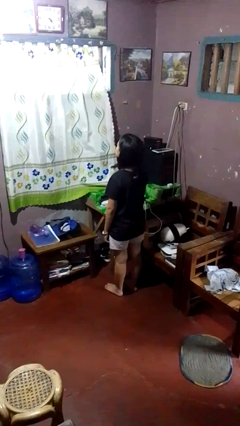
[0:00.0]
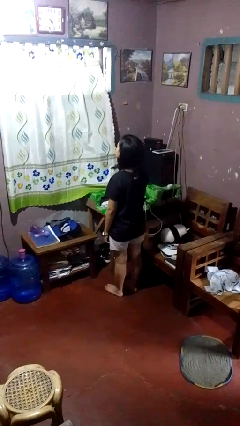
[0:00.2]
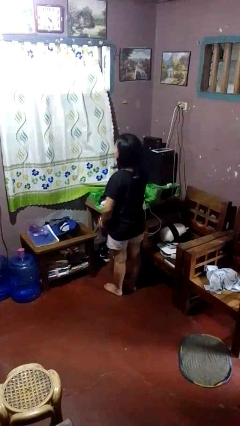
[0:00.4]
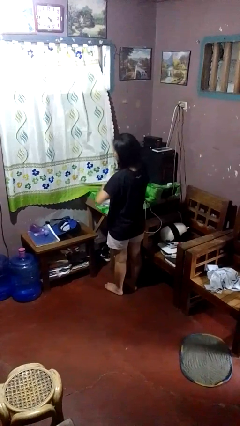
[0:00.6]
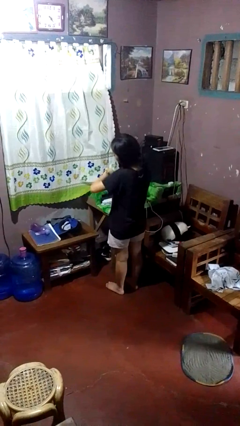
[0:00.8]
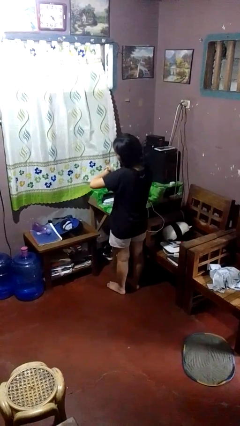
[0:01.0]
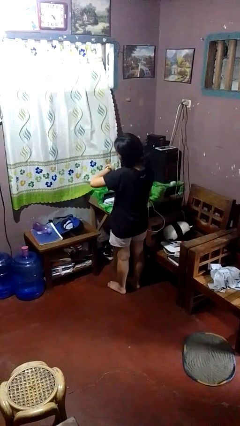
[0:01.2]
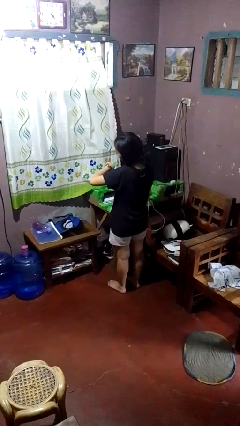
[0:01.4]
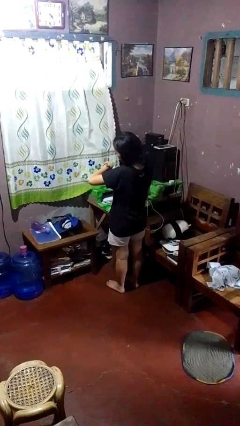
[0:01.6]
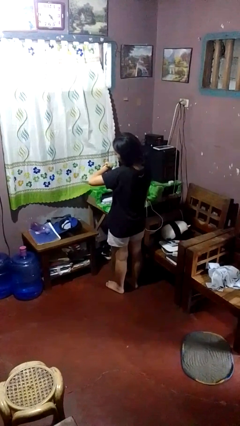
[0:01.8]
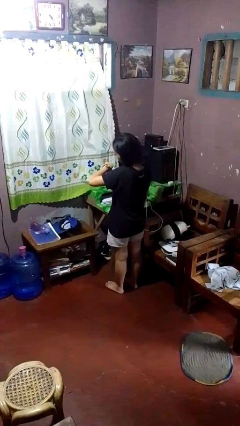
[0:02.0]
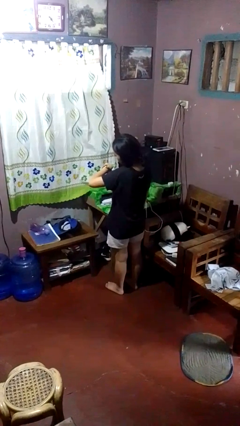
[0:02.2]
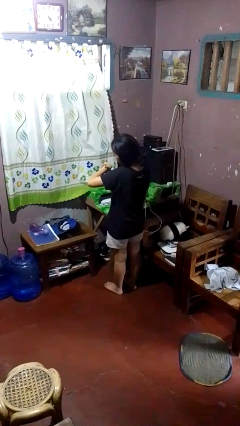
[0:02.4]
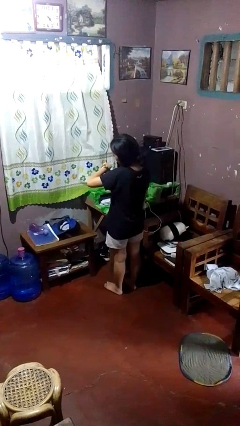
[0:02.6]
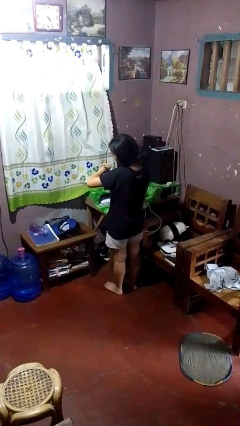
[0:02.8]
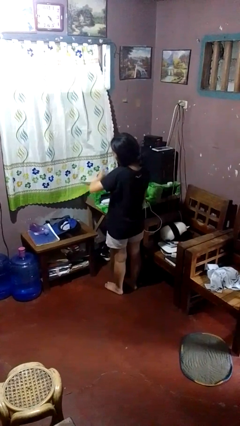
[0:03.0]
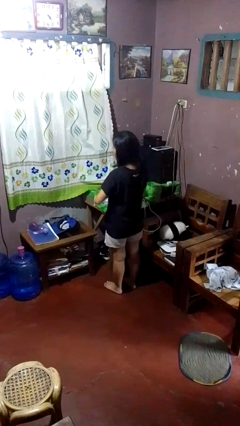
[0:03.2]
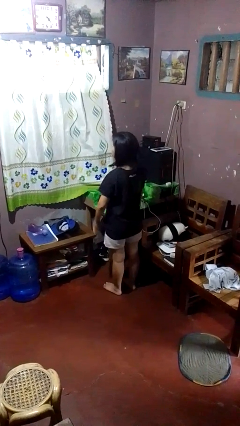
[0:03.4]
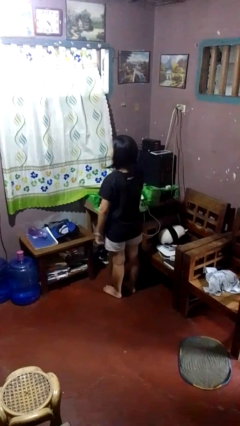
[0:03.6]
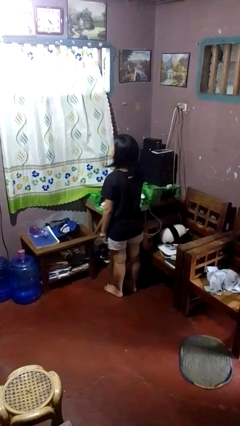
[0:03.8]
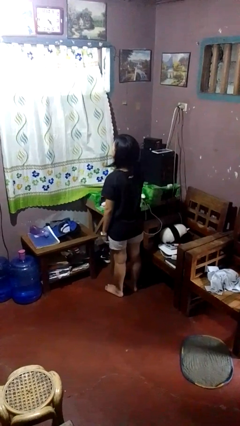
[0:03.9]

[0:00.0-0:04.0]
person looks at wristwatch

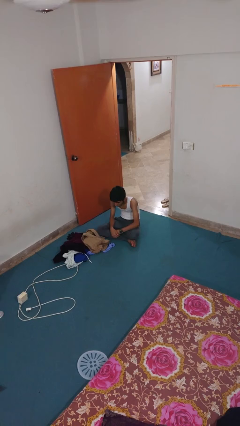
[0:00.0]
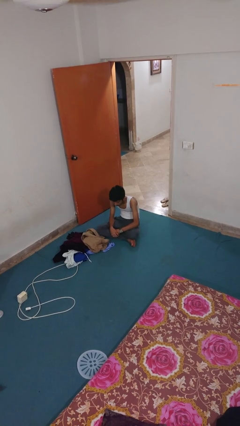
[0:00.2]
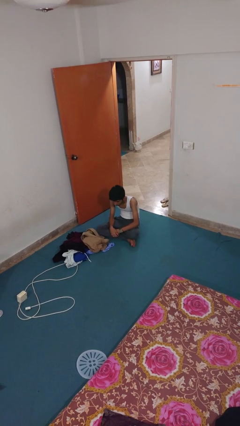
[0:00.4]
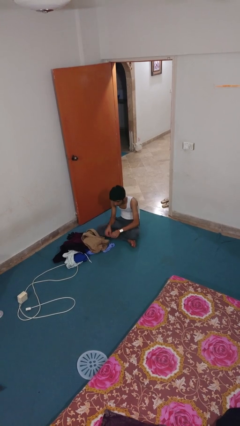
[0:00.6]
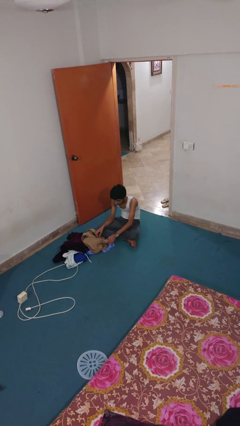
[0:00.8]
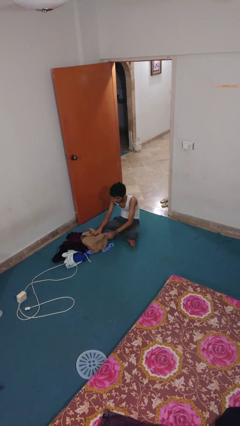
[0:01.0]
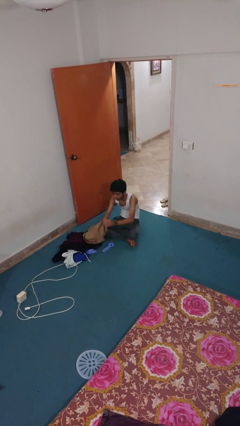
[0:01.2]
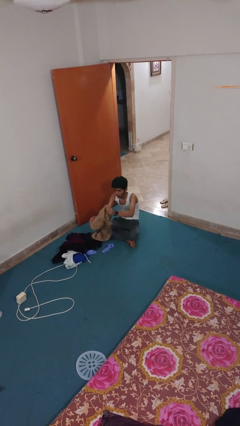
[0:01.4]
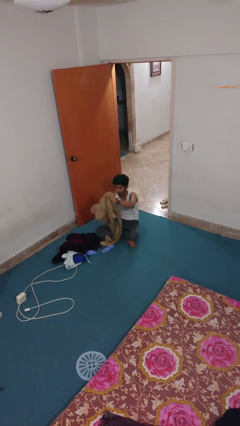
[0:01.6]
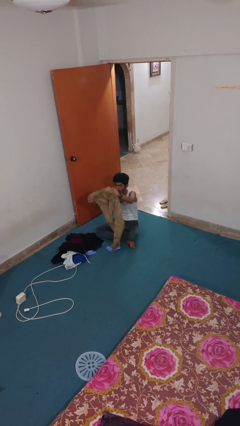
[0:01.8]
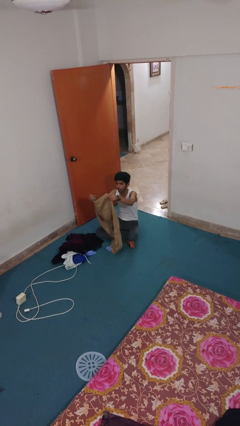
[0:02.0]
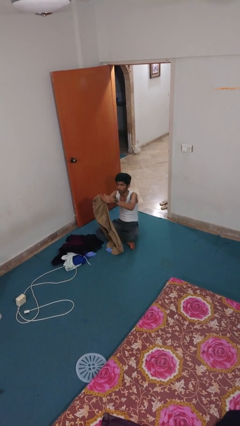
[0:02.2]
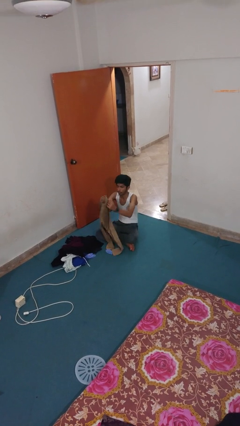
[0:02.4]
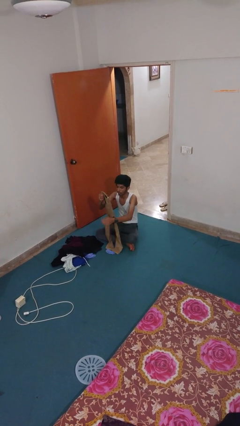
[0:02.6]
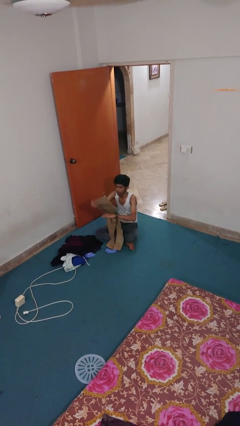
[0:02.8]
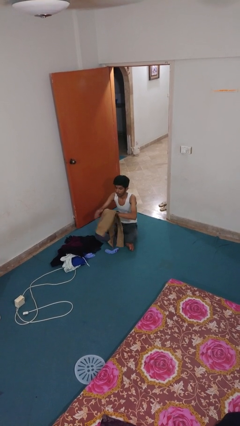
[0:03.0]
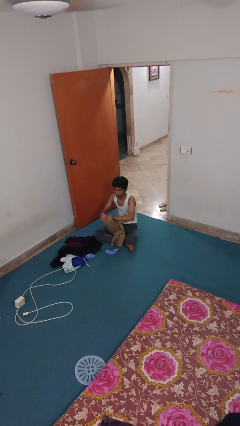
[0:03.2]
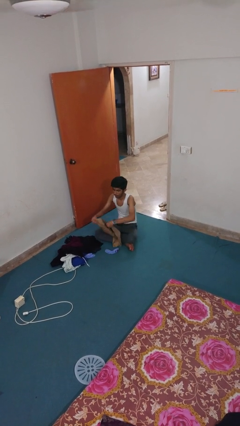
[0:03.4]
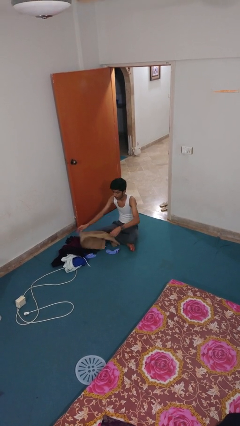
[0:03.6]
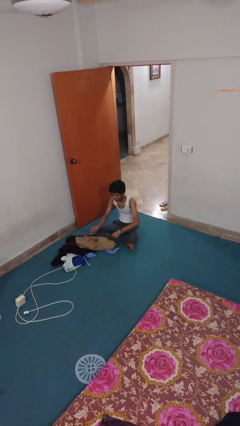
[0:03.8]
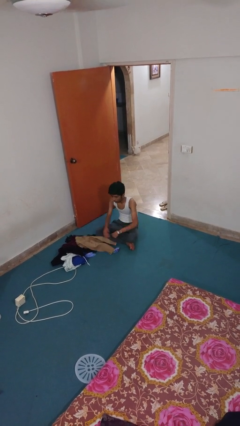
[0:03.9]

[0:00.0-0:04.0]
person folds pants

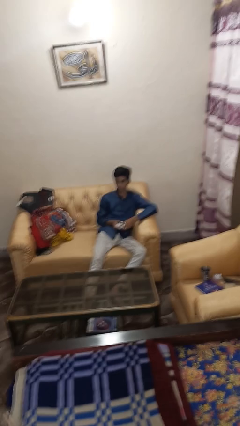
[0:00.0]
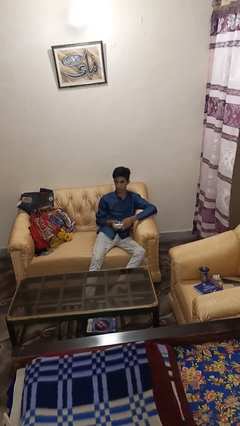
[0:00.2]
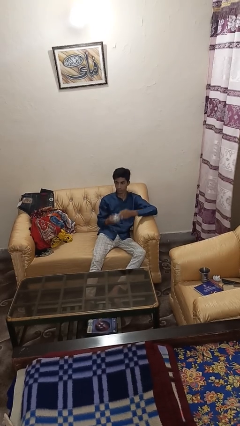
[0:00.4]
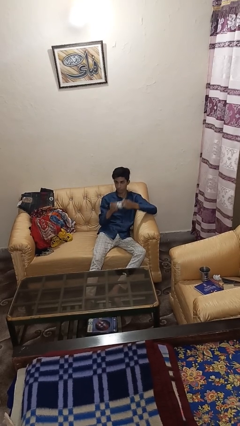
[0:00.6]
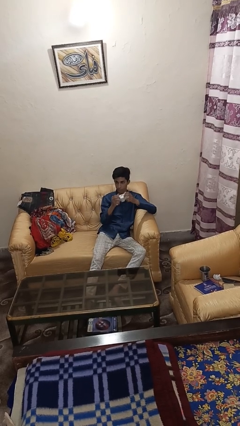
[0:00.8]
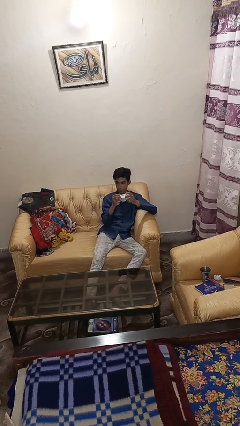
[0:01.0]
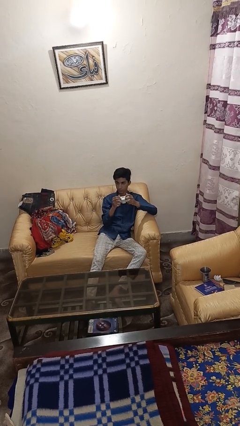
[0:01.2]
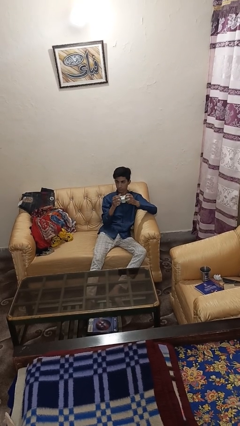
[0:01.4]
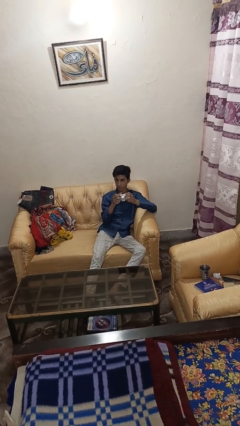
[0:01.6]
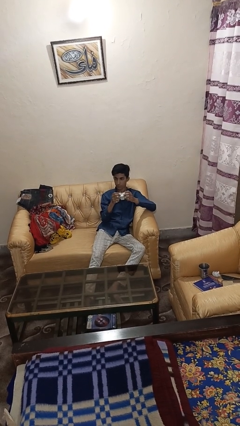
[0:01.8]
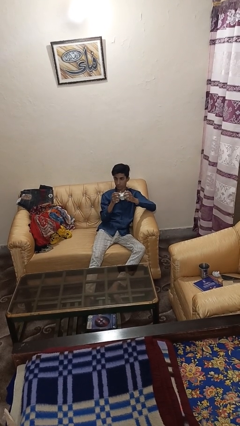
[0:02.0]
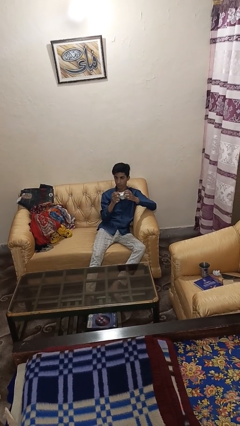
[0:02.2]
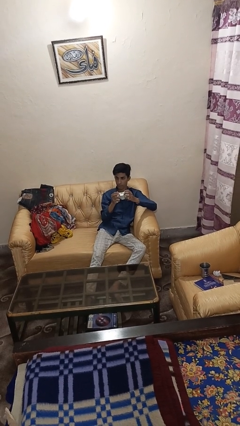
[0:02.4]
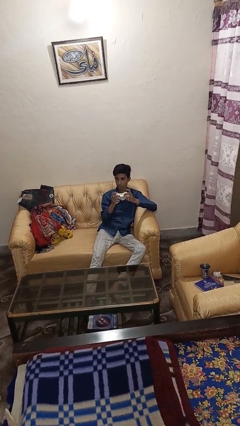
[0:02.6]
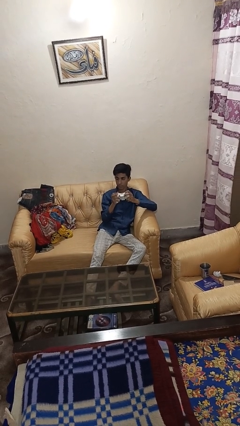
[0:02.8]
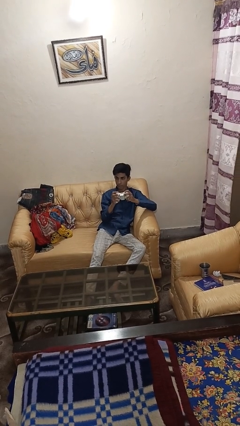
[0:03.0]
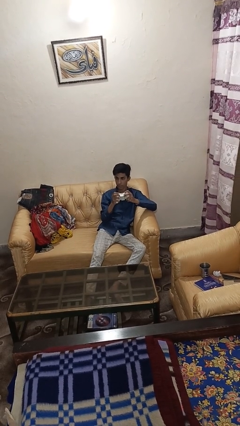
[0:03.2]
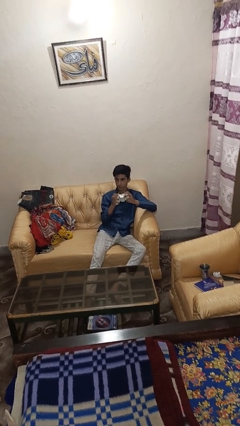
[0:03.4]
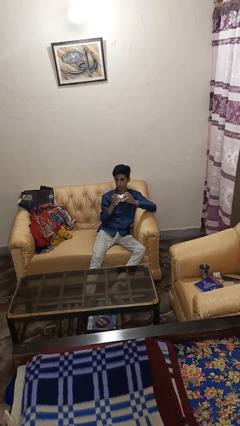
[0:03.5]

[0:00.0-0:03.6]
person interacts with handheld game

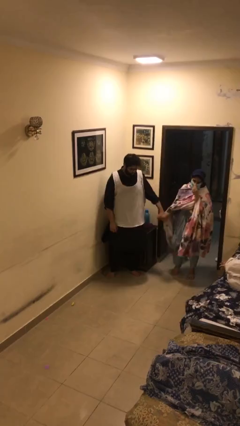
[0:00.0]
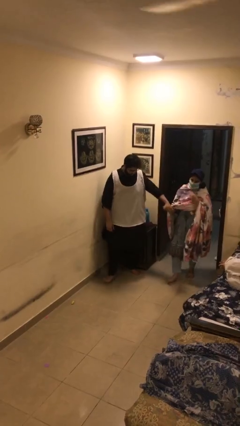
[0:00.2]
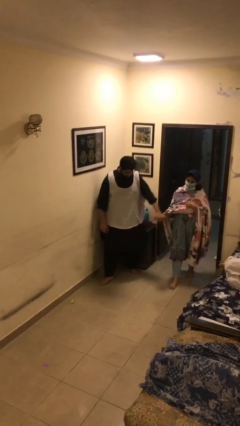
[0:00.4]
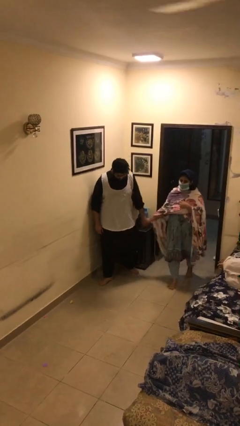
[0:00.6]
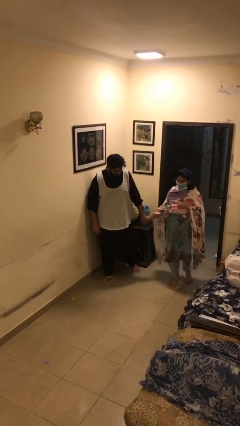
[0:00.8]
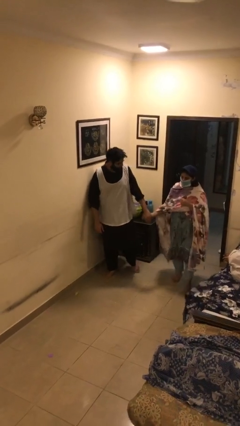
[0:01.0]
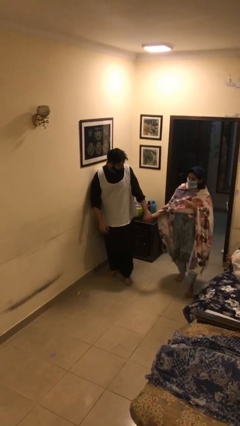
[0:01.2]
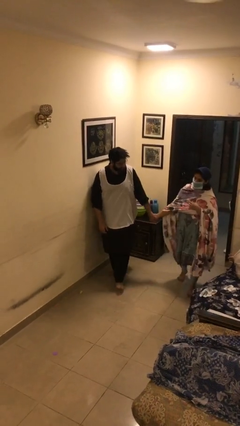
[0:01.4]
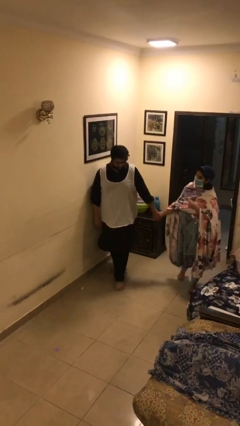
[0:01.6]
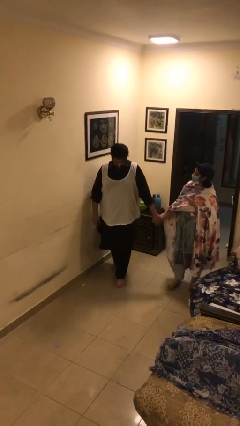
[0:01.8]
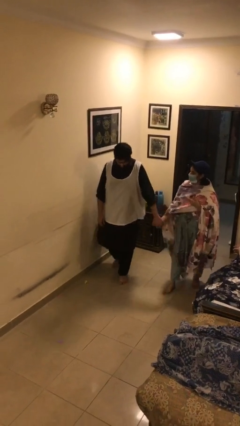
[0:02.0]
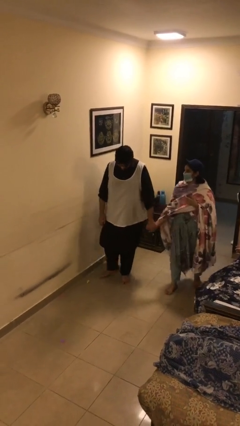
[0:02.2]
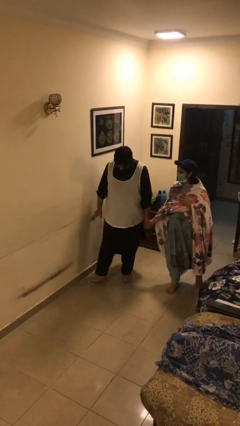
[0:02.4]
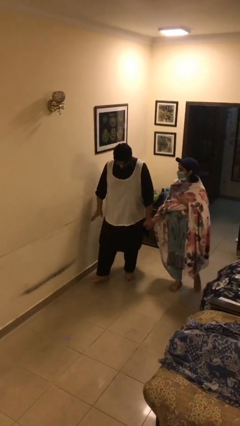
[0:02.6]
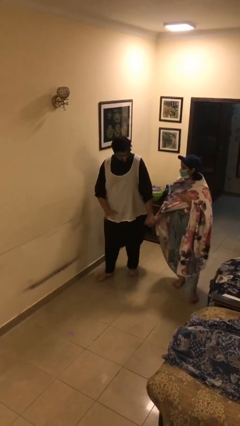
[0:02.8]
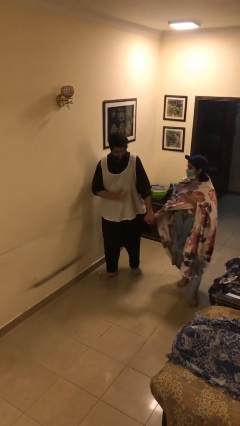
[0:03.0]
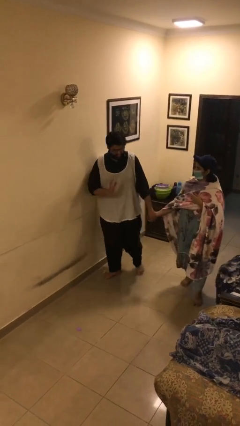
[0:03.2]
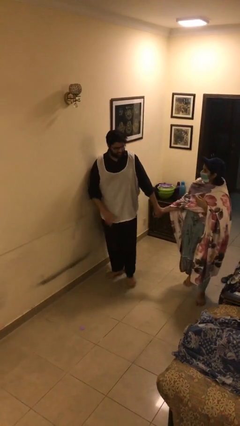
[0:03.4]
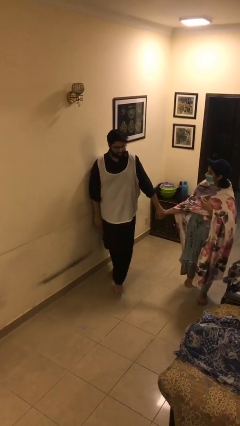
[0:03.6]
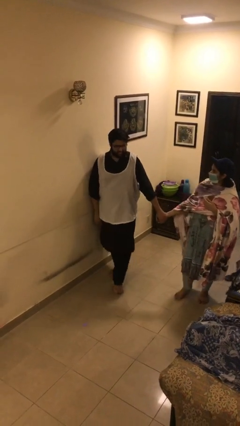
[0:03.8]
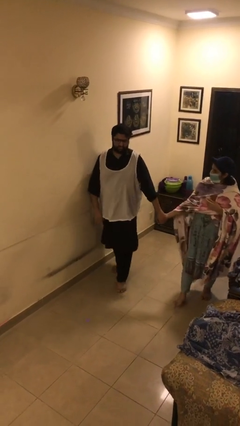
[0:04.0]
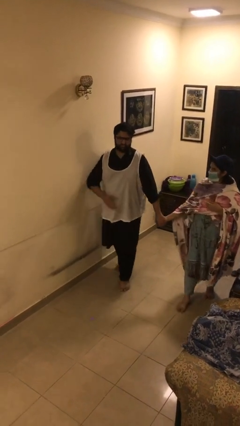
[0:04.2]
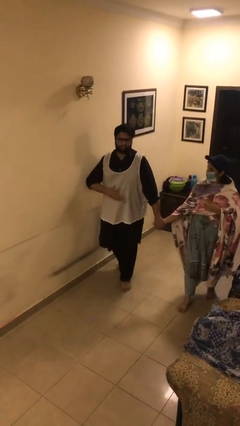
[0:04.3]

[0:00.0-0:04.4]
person holds hand

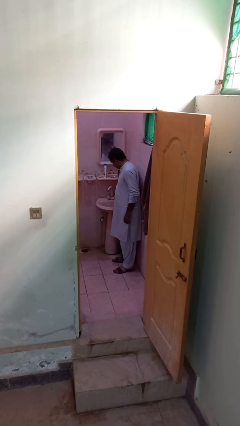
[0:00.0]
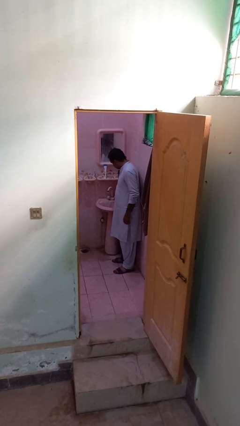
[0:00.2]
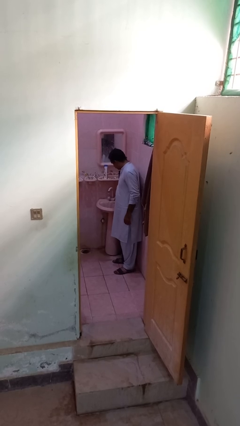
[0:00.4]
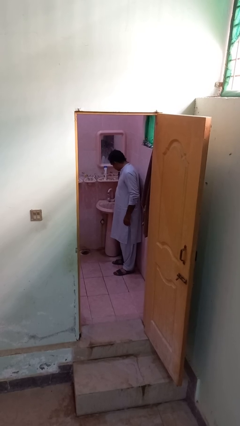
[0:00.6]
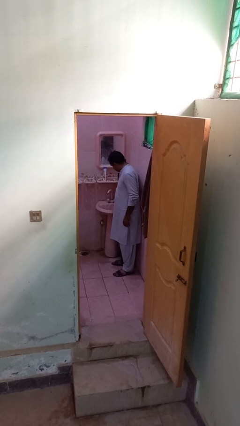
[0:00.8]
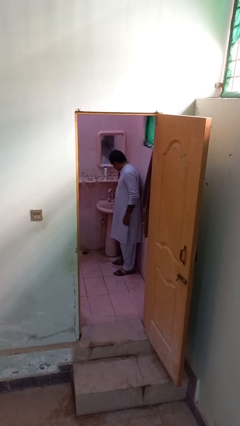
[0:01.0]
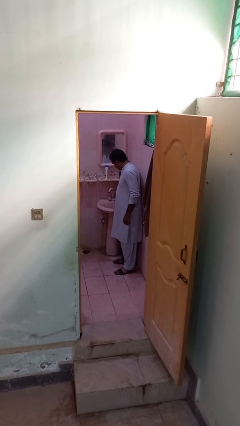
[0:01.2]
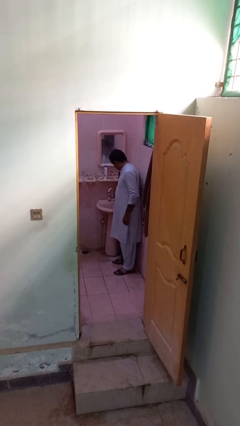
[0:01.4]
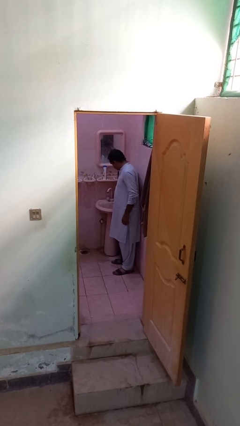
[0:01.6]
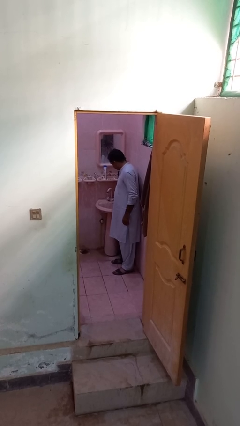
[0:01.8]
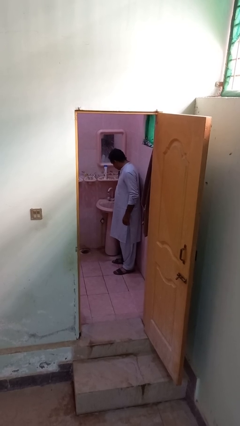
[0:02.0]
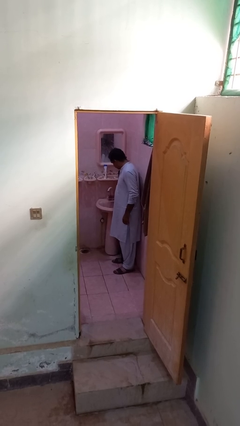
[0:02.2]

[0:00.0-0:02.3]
person turns off faucet
